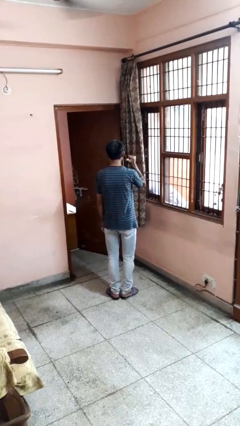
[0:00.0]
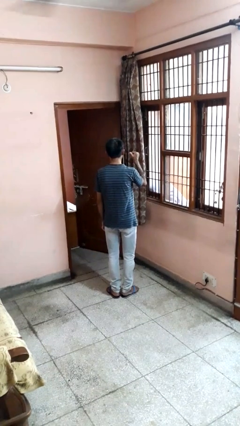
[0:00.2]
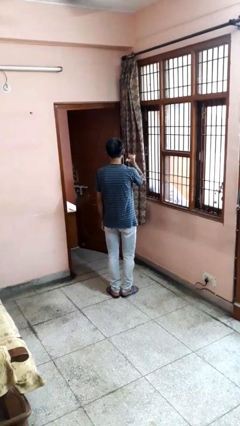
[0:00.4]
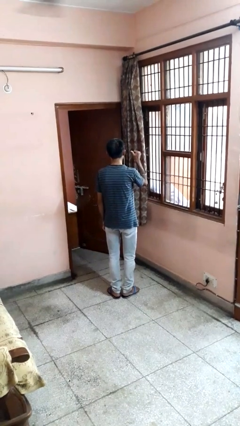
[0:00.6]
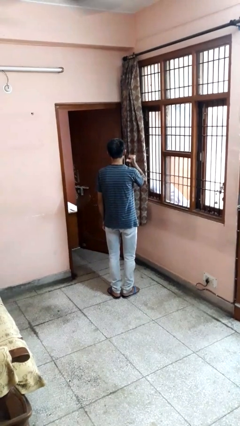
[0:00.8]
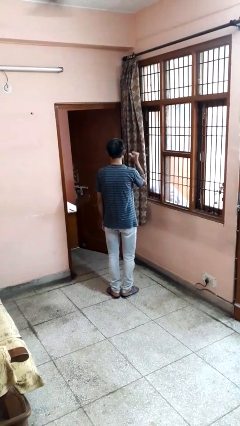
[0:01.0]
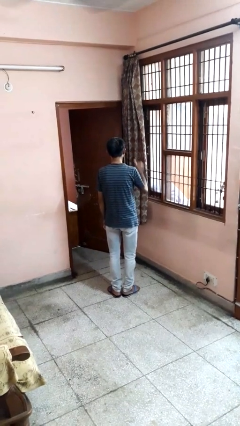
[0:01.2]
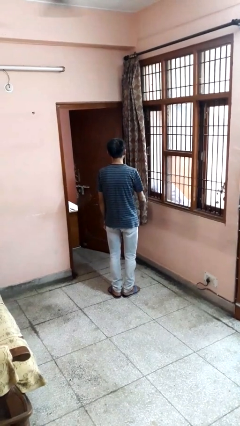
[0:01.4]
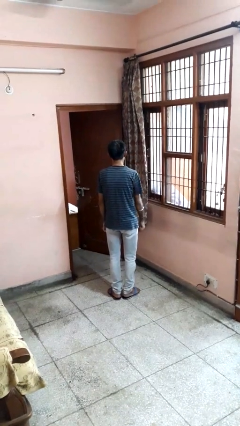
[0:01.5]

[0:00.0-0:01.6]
person gestures behind me

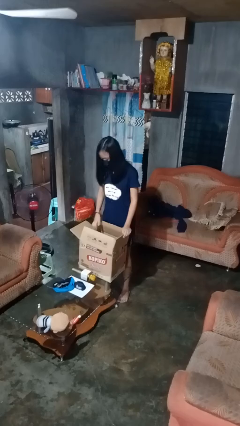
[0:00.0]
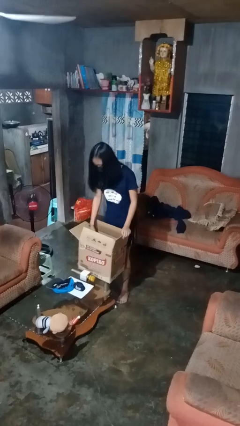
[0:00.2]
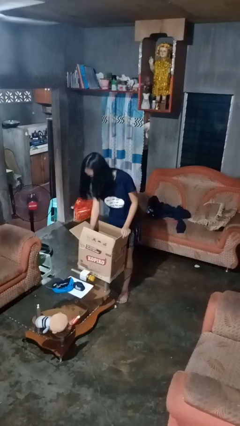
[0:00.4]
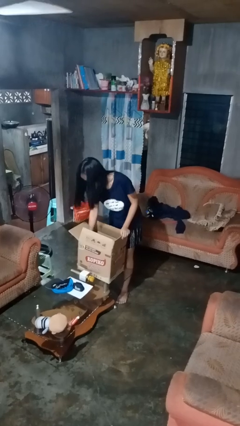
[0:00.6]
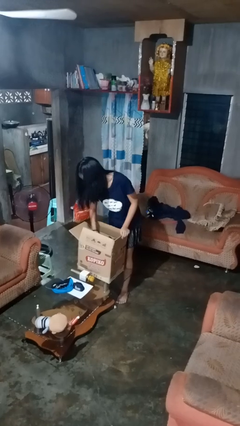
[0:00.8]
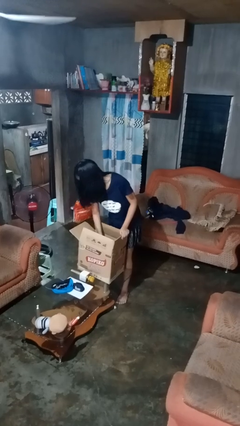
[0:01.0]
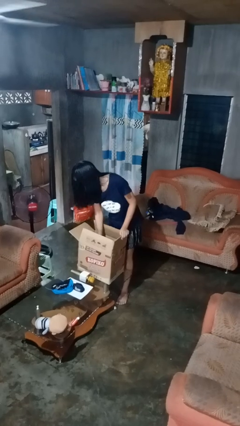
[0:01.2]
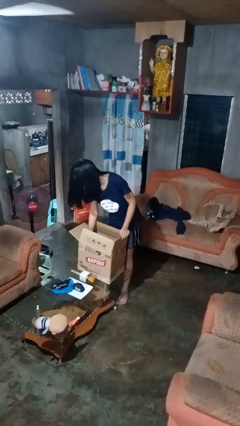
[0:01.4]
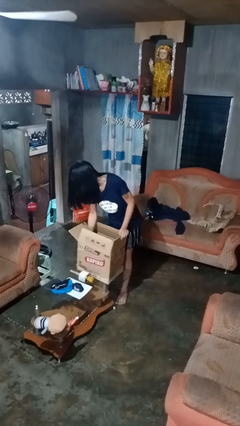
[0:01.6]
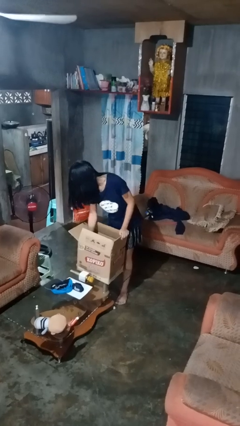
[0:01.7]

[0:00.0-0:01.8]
person searches in box

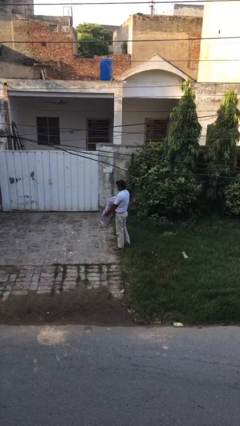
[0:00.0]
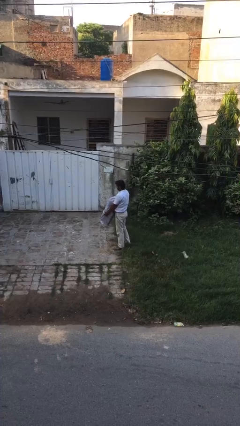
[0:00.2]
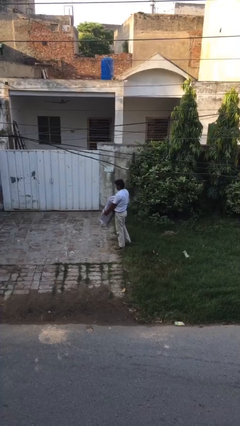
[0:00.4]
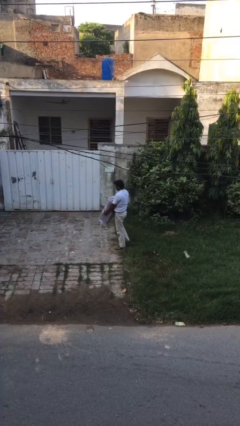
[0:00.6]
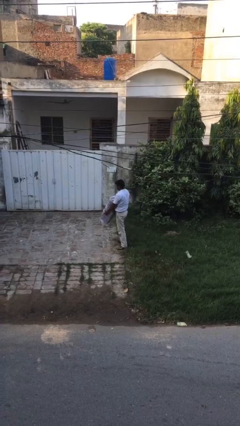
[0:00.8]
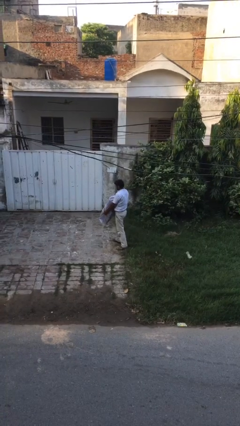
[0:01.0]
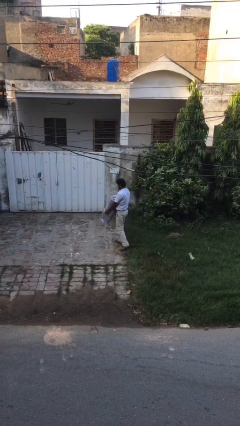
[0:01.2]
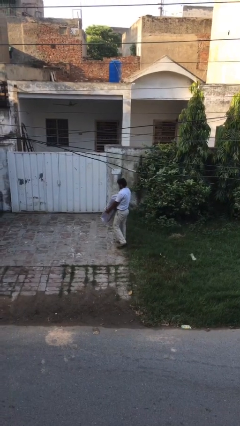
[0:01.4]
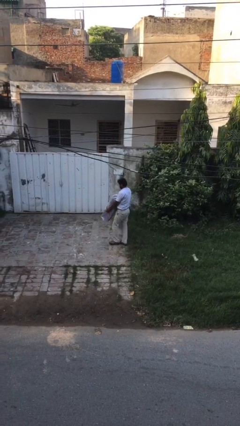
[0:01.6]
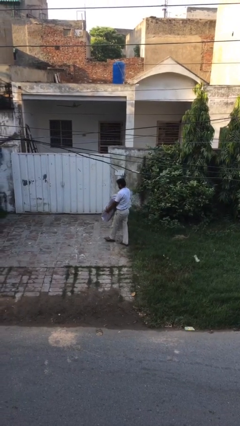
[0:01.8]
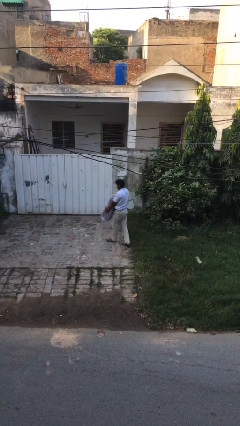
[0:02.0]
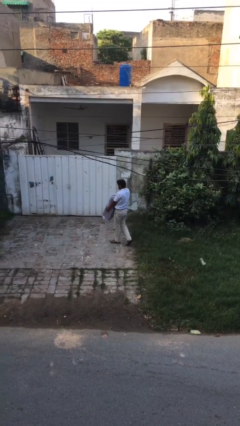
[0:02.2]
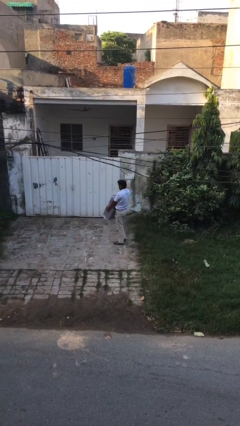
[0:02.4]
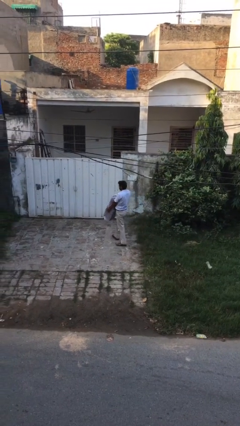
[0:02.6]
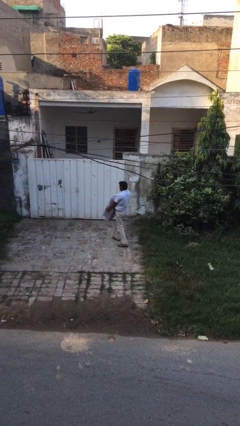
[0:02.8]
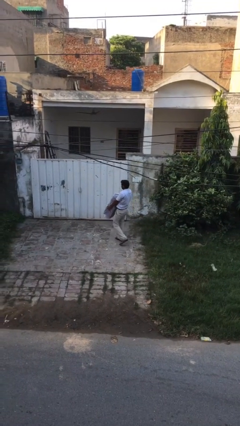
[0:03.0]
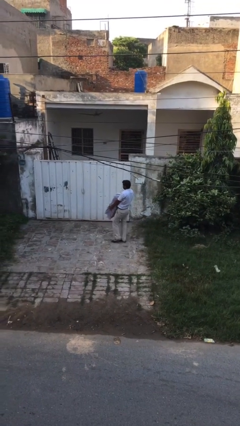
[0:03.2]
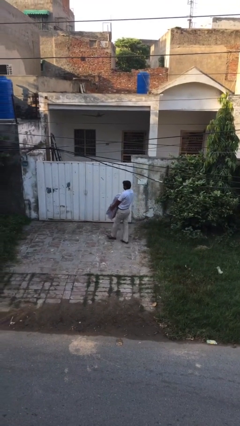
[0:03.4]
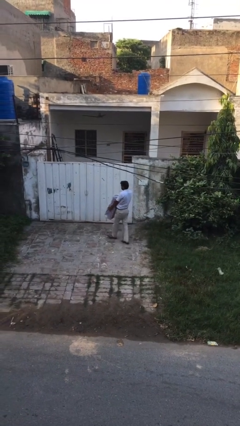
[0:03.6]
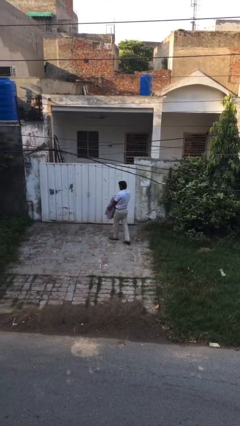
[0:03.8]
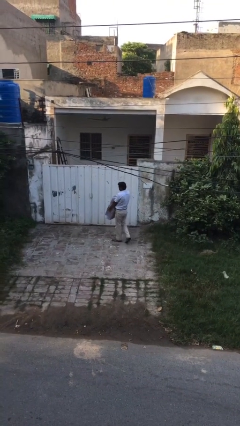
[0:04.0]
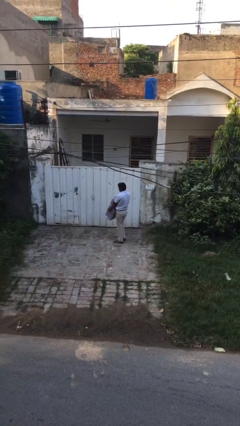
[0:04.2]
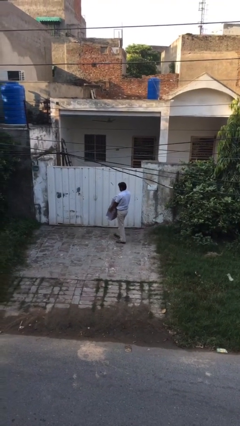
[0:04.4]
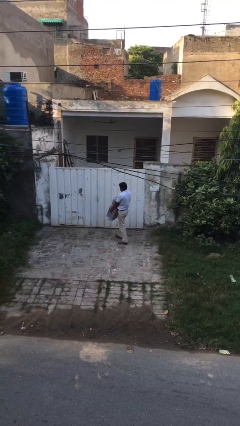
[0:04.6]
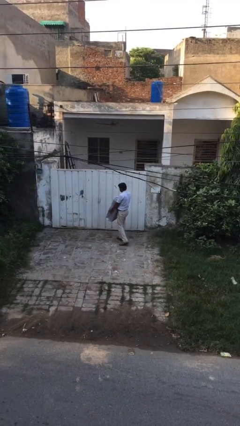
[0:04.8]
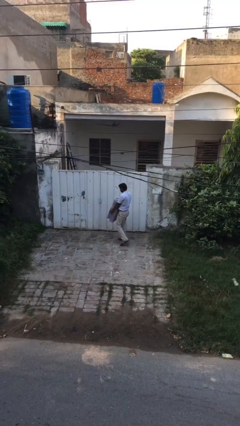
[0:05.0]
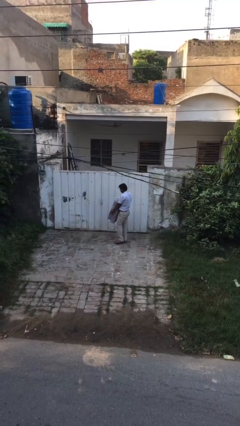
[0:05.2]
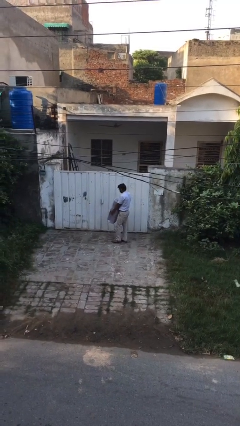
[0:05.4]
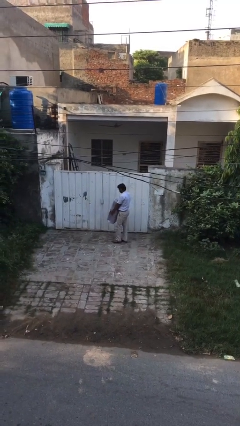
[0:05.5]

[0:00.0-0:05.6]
person carries heavy object

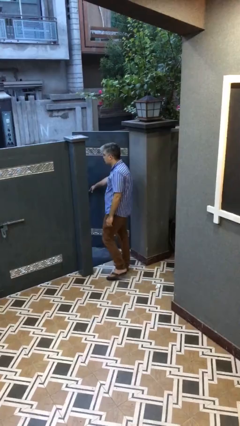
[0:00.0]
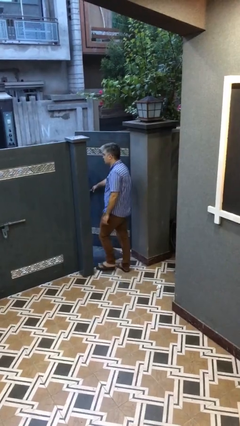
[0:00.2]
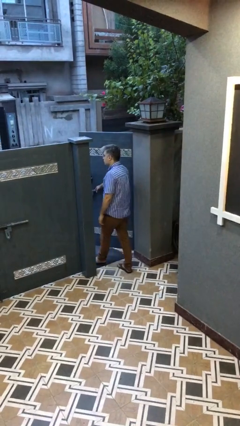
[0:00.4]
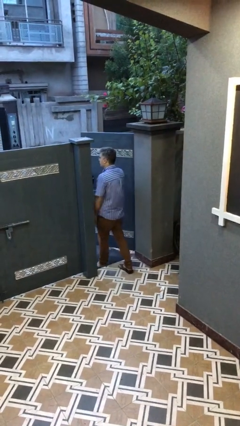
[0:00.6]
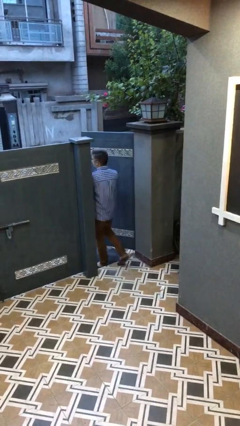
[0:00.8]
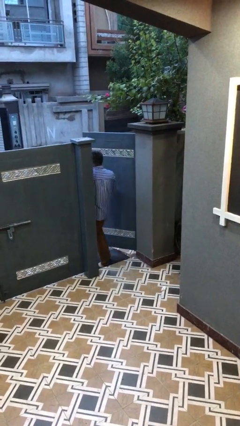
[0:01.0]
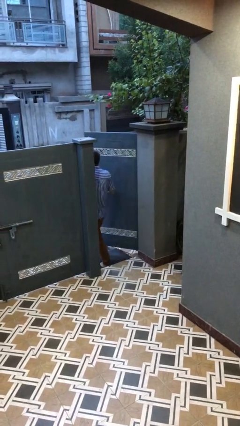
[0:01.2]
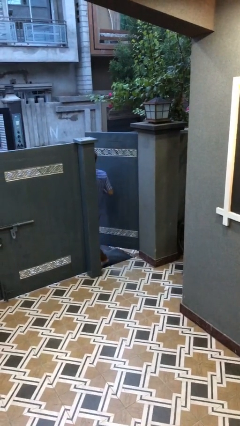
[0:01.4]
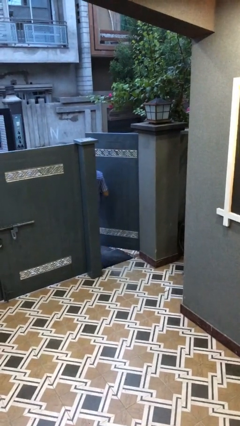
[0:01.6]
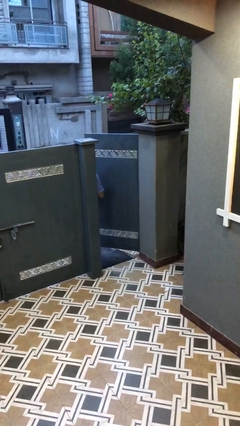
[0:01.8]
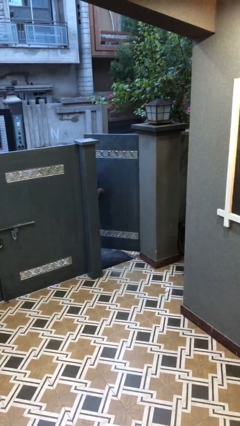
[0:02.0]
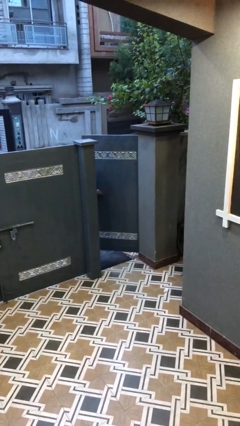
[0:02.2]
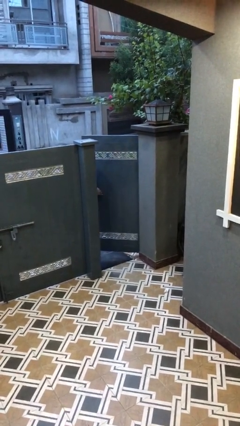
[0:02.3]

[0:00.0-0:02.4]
person exits scene through structure

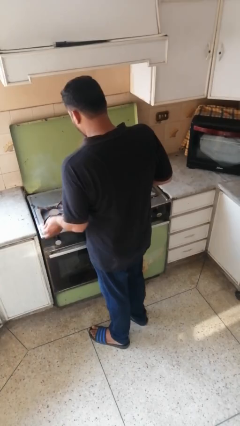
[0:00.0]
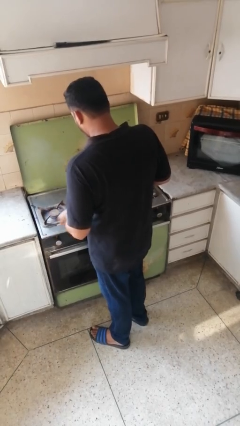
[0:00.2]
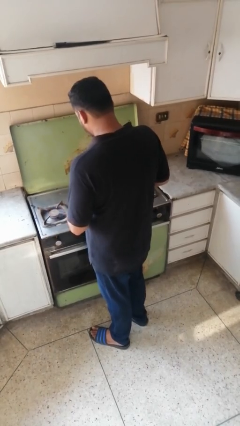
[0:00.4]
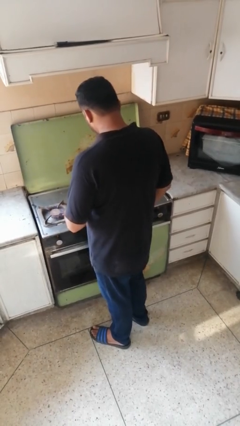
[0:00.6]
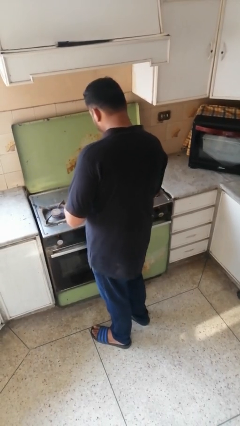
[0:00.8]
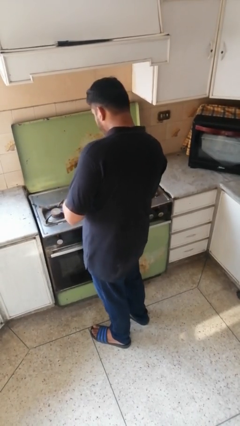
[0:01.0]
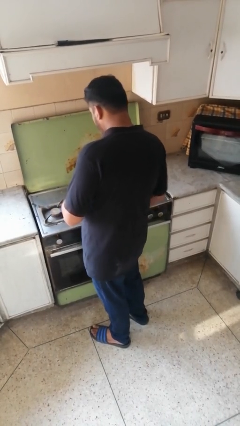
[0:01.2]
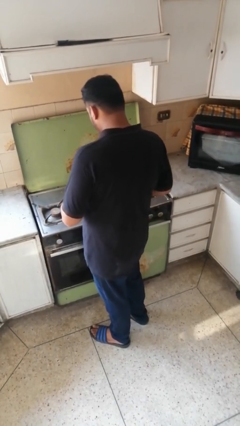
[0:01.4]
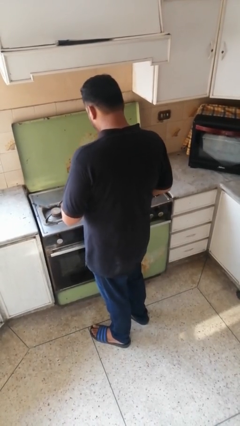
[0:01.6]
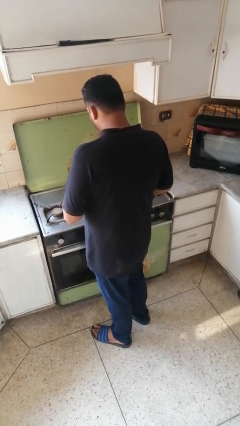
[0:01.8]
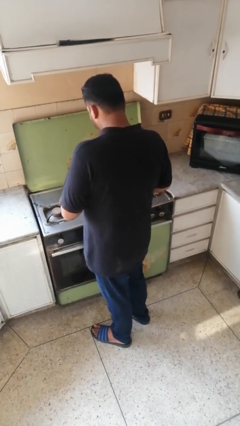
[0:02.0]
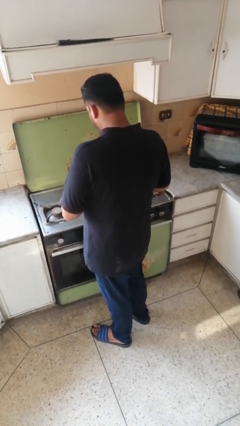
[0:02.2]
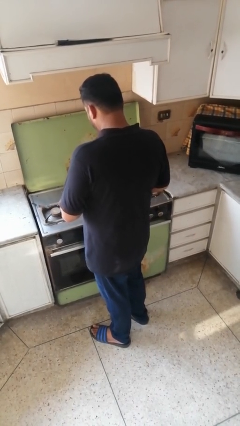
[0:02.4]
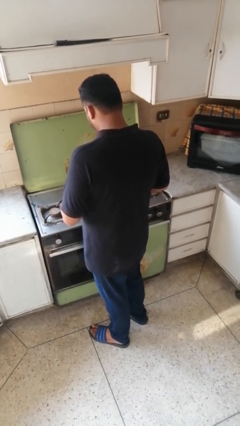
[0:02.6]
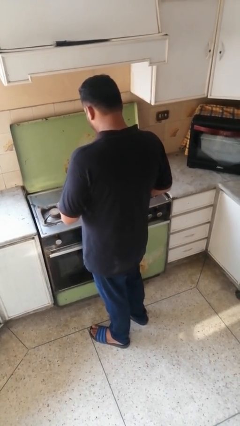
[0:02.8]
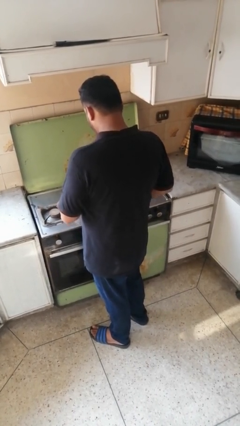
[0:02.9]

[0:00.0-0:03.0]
person turns off stovetop

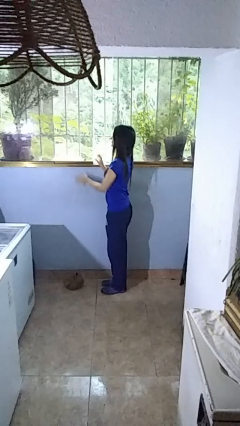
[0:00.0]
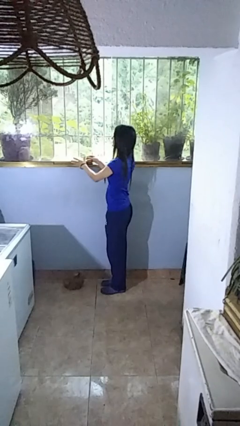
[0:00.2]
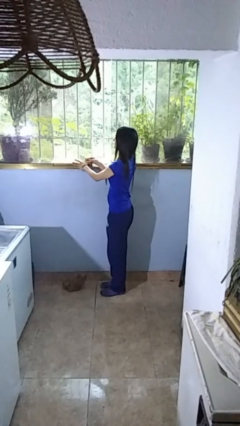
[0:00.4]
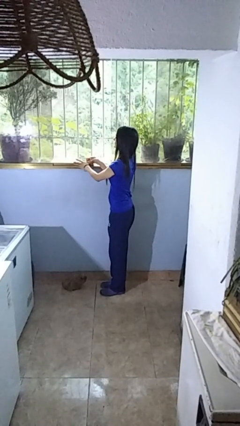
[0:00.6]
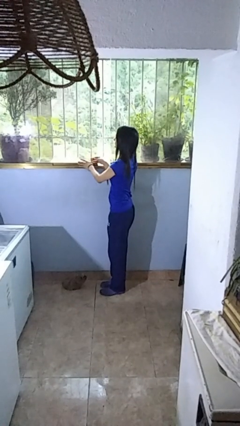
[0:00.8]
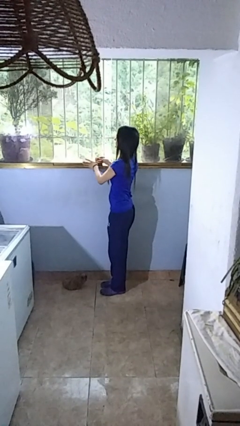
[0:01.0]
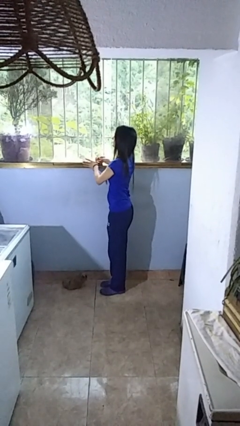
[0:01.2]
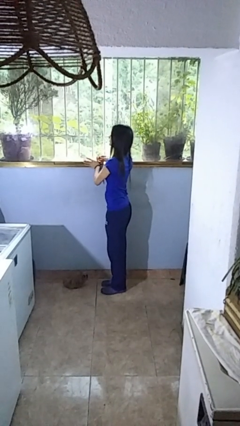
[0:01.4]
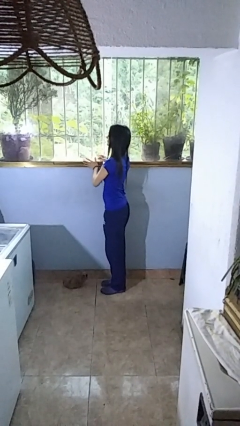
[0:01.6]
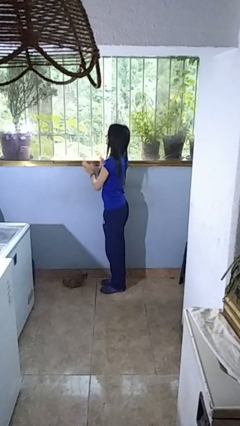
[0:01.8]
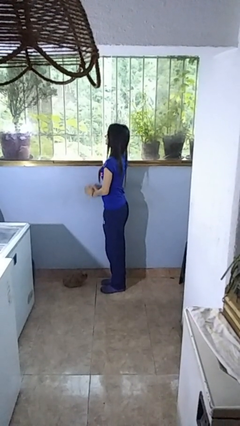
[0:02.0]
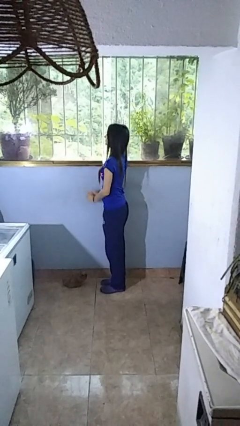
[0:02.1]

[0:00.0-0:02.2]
person closes home window

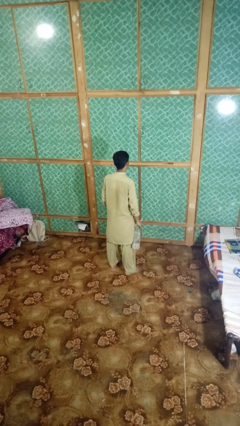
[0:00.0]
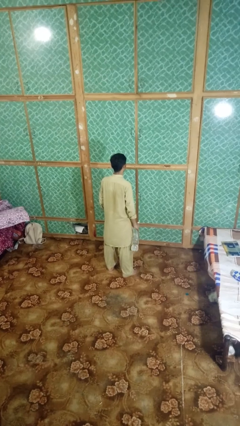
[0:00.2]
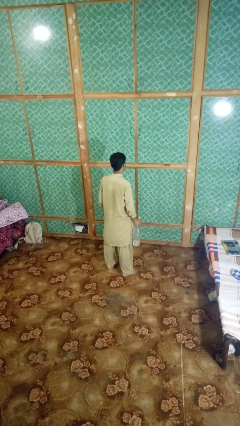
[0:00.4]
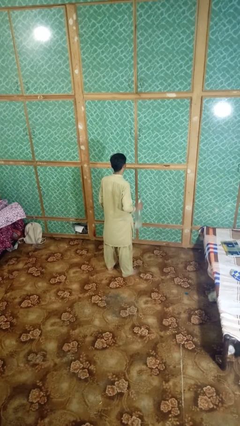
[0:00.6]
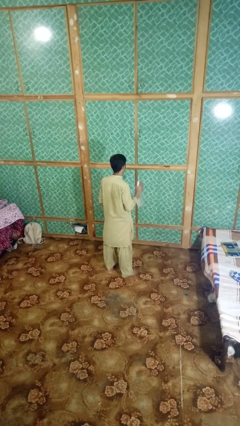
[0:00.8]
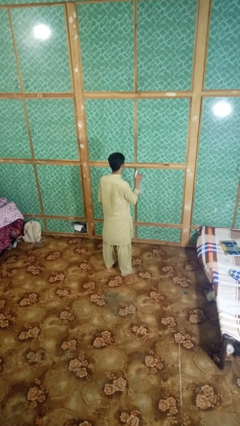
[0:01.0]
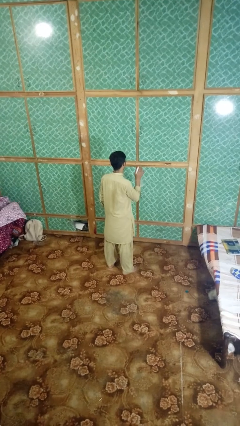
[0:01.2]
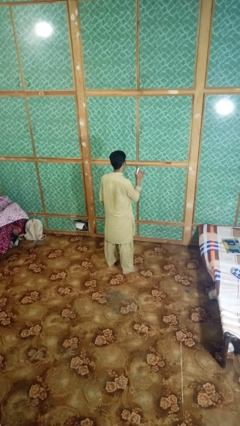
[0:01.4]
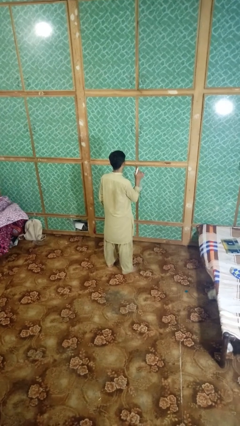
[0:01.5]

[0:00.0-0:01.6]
person sprays from bottle
